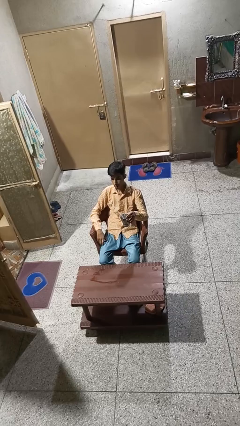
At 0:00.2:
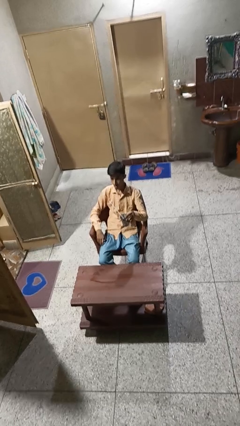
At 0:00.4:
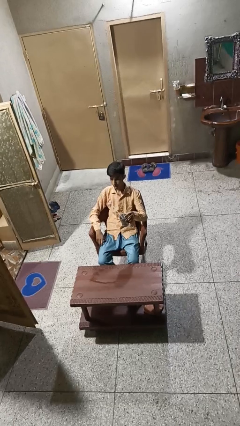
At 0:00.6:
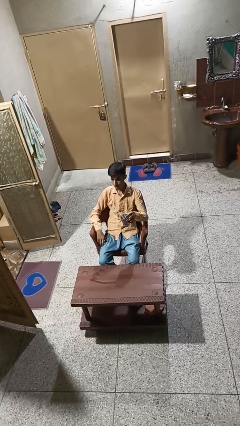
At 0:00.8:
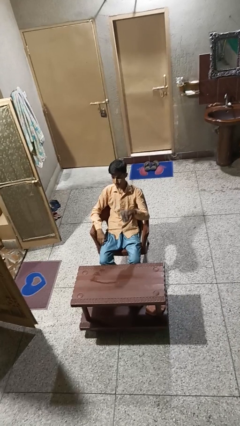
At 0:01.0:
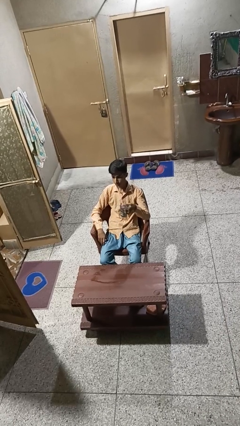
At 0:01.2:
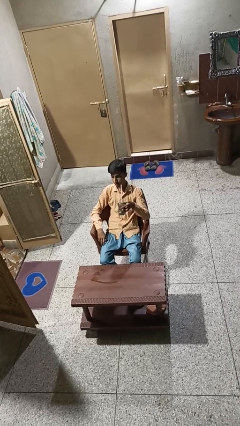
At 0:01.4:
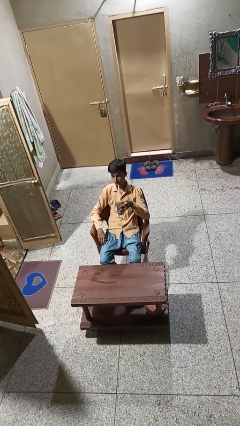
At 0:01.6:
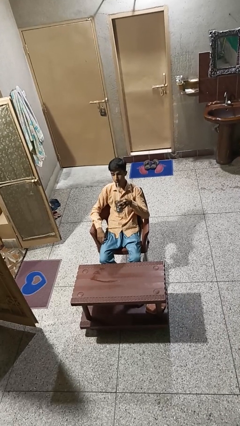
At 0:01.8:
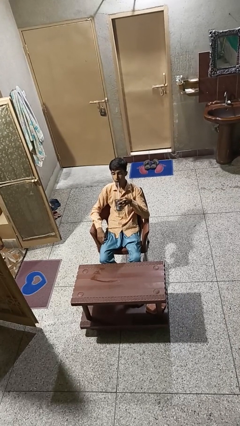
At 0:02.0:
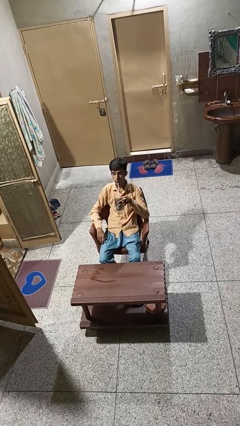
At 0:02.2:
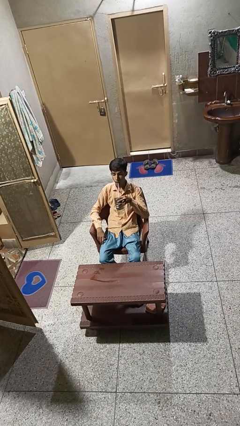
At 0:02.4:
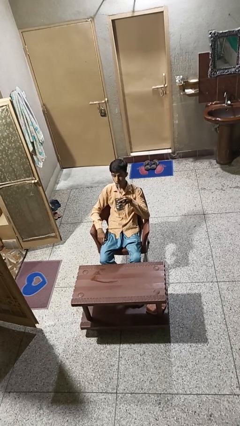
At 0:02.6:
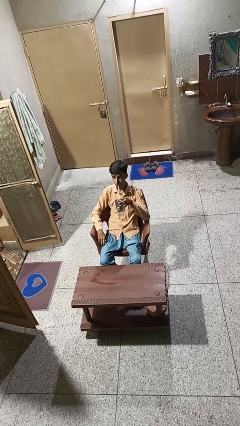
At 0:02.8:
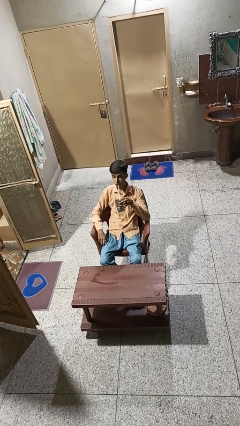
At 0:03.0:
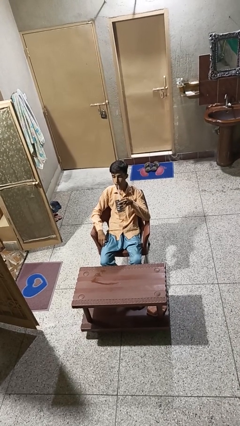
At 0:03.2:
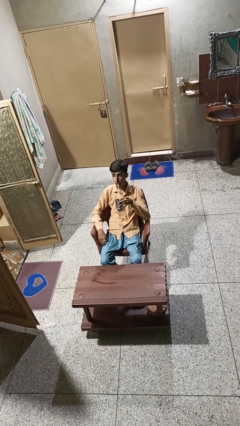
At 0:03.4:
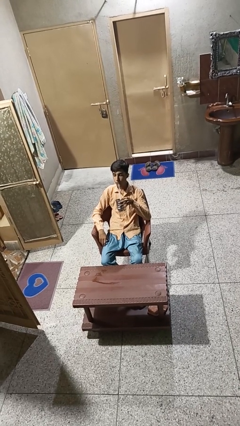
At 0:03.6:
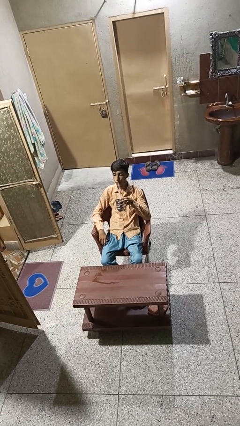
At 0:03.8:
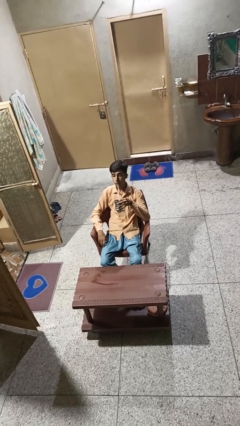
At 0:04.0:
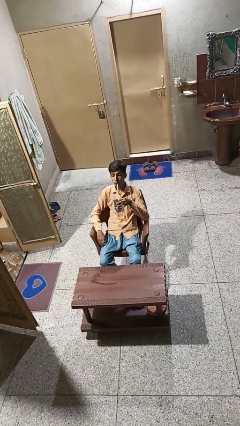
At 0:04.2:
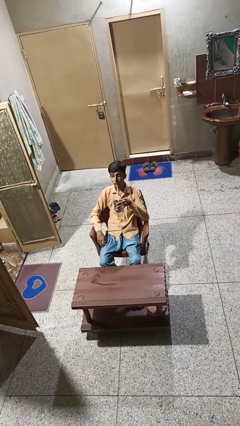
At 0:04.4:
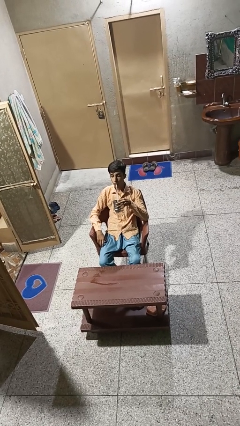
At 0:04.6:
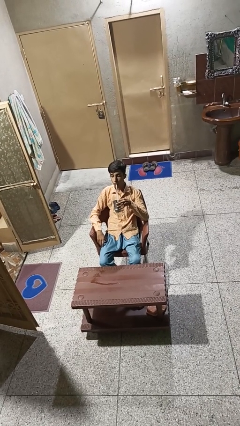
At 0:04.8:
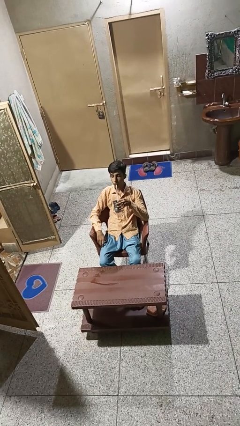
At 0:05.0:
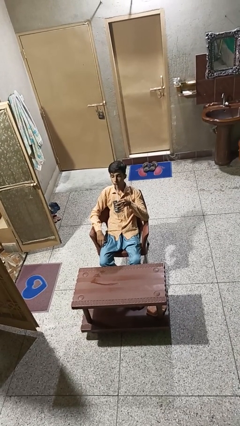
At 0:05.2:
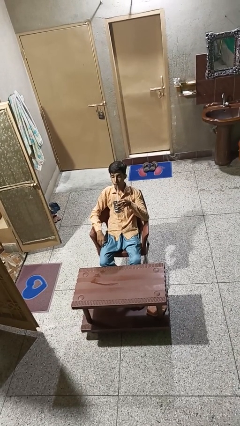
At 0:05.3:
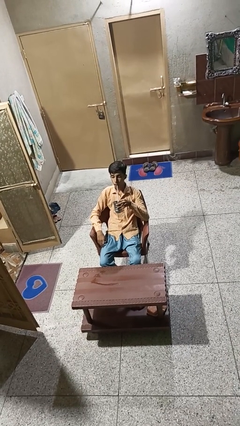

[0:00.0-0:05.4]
person drinks from straw

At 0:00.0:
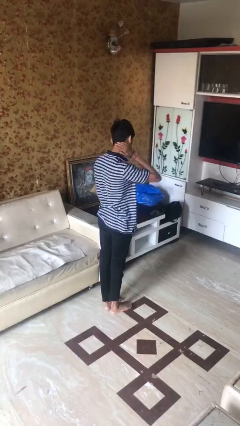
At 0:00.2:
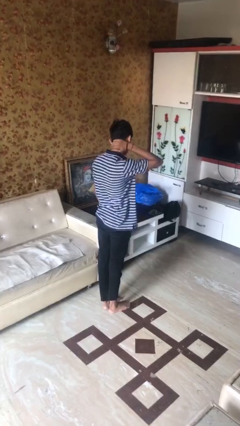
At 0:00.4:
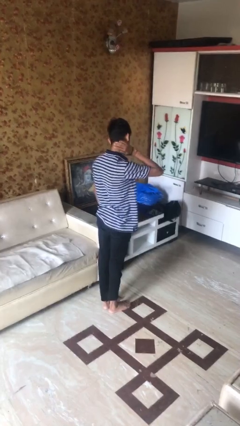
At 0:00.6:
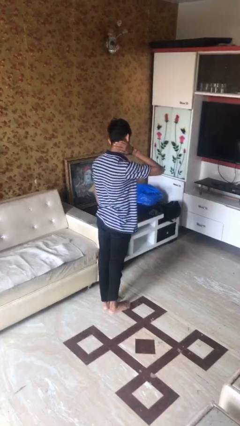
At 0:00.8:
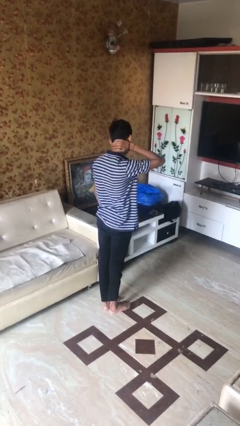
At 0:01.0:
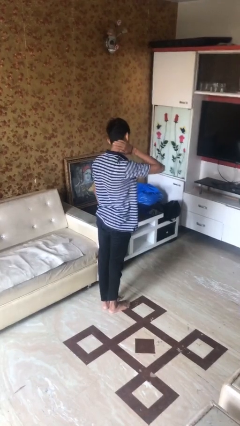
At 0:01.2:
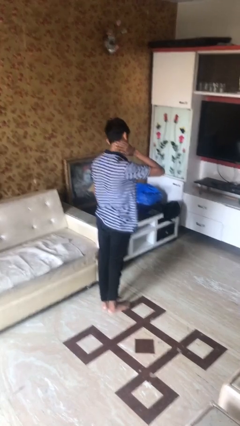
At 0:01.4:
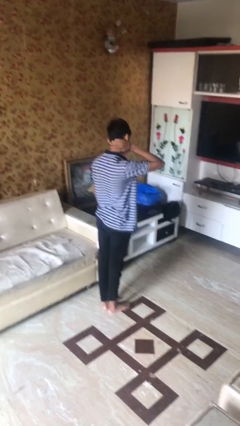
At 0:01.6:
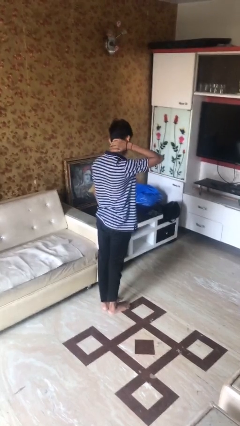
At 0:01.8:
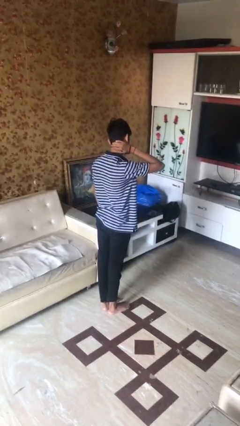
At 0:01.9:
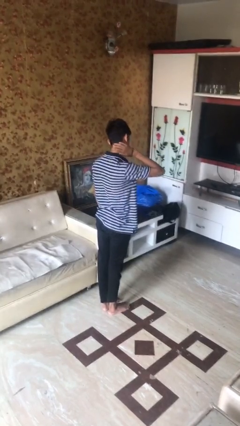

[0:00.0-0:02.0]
person rubs neck

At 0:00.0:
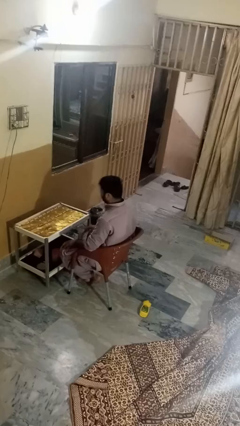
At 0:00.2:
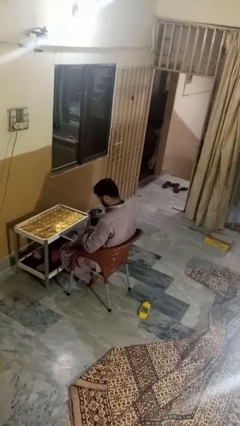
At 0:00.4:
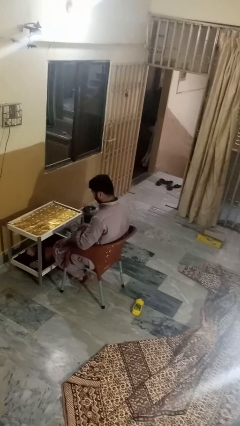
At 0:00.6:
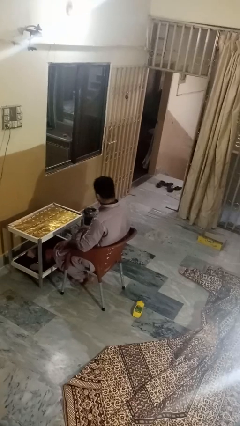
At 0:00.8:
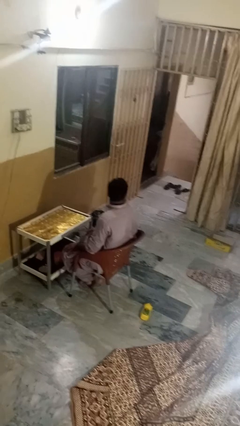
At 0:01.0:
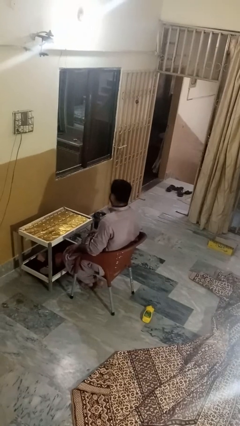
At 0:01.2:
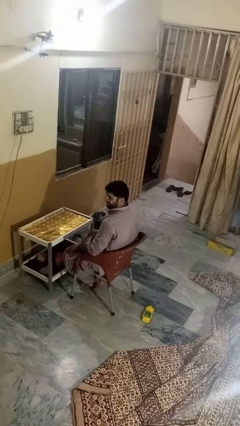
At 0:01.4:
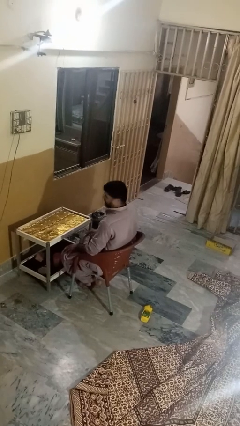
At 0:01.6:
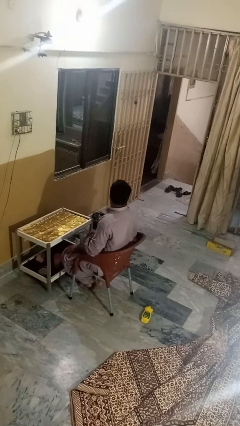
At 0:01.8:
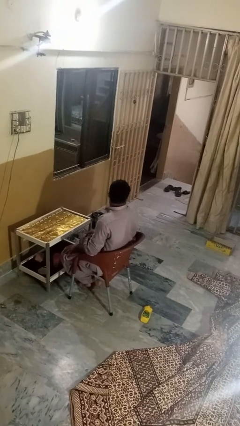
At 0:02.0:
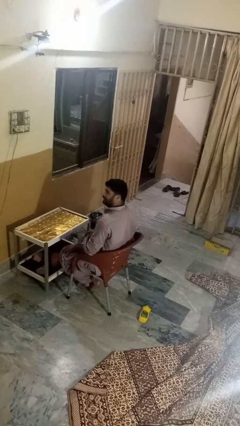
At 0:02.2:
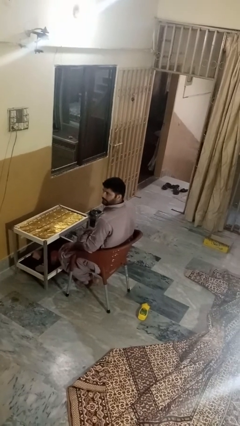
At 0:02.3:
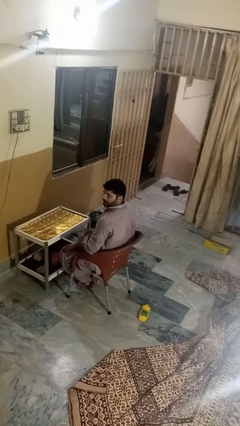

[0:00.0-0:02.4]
person shakes head

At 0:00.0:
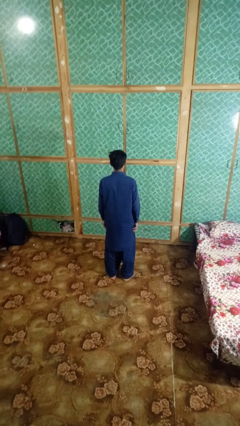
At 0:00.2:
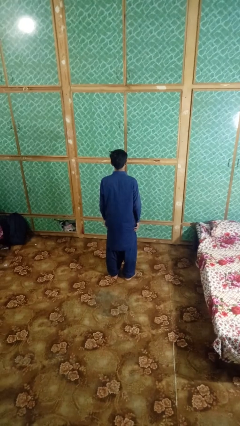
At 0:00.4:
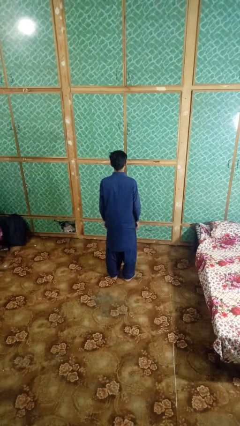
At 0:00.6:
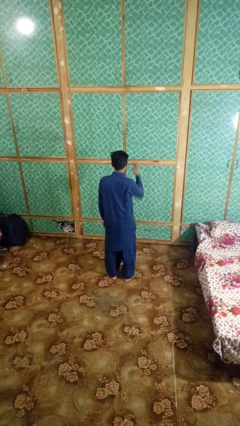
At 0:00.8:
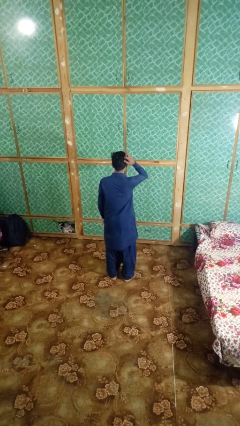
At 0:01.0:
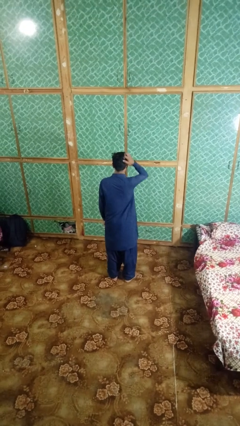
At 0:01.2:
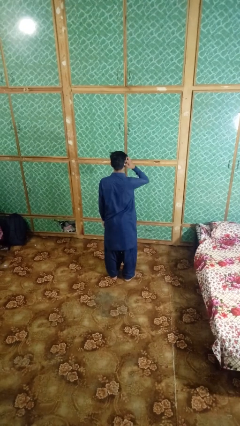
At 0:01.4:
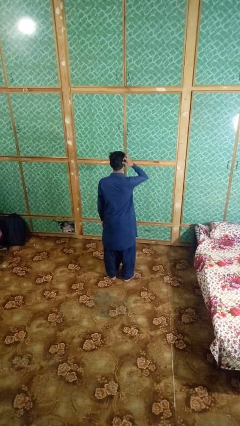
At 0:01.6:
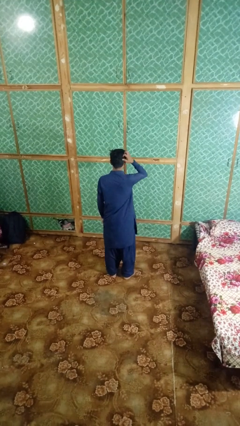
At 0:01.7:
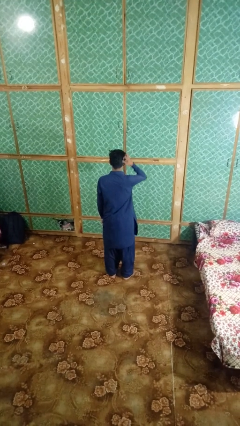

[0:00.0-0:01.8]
person strokes hair

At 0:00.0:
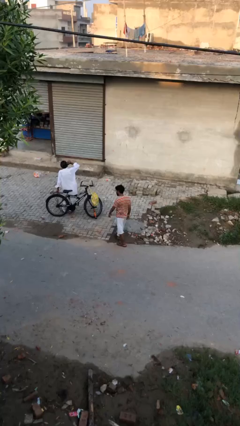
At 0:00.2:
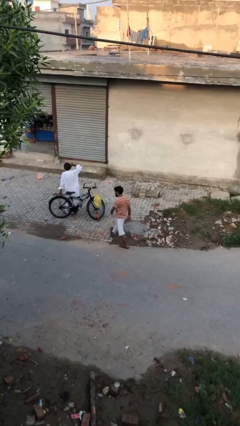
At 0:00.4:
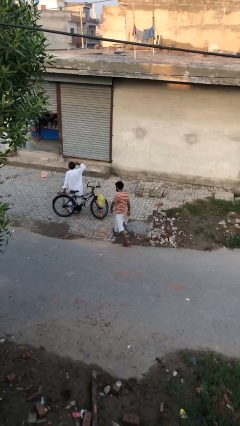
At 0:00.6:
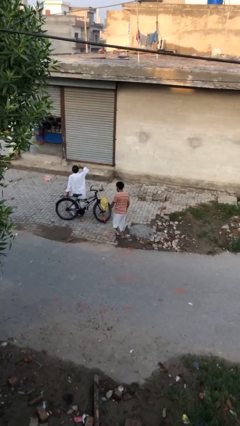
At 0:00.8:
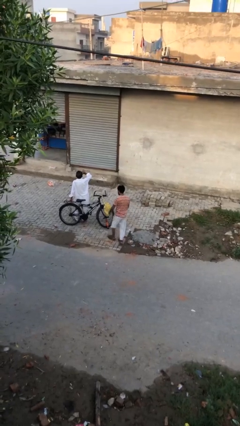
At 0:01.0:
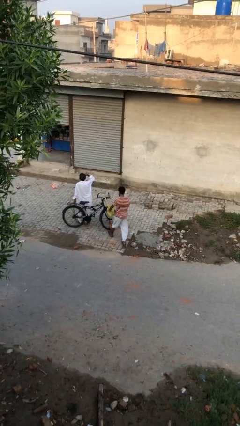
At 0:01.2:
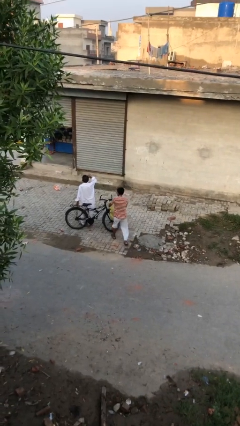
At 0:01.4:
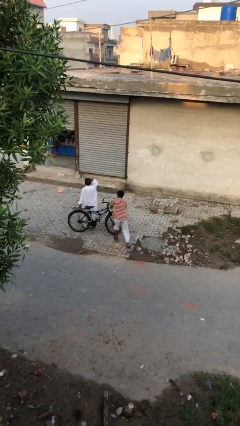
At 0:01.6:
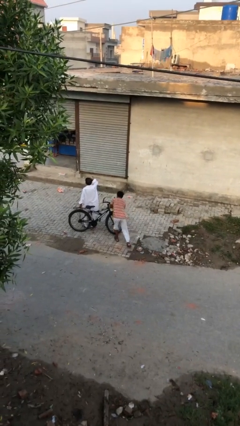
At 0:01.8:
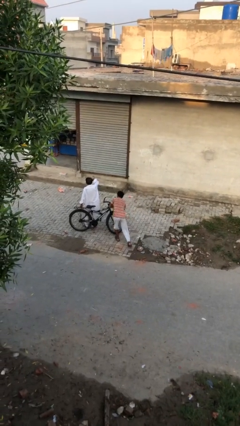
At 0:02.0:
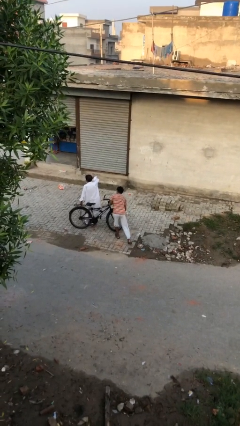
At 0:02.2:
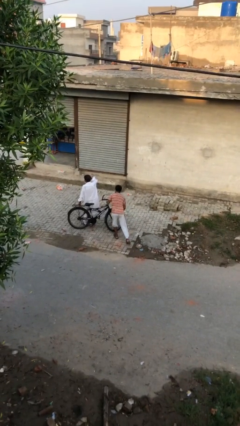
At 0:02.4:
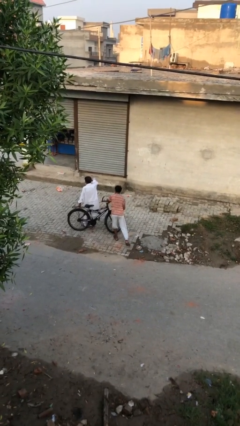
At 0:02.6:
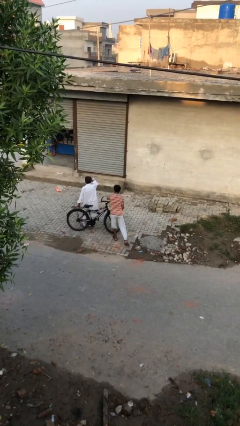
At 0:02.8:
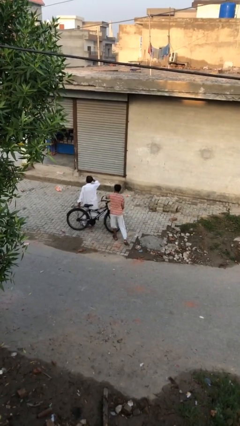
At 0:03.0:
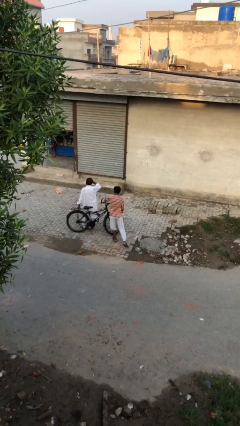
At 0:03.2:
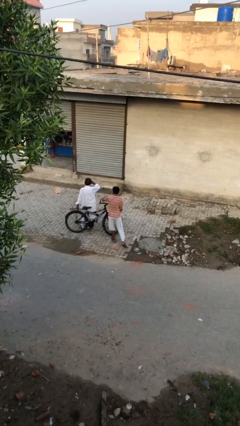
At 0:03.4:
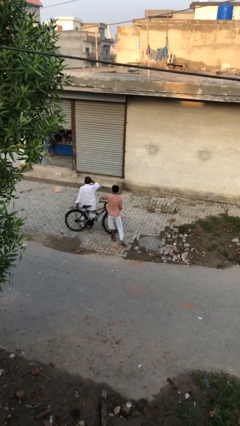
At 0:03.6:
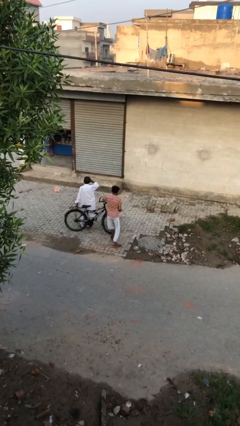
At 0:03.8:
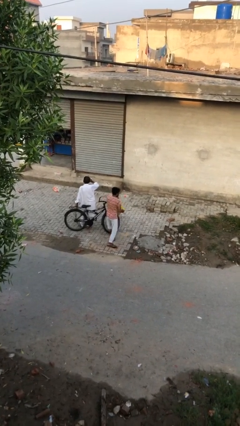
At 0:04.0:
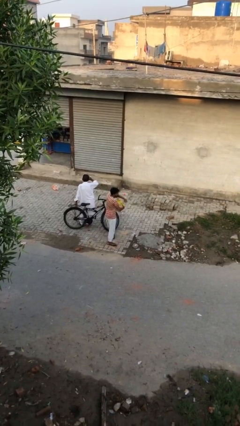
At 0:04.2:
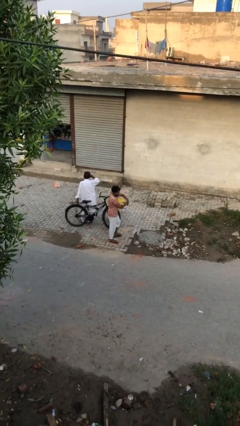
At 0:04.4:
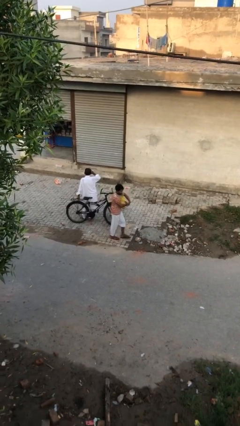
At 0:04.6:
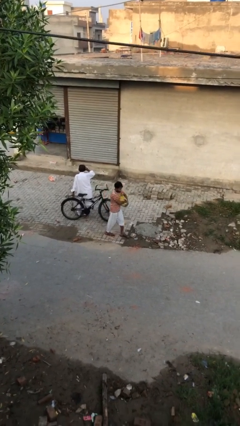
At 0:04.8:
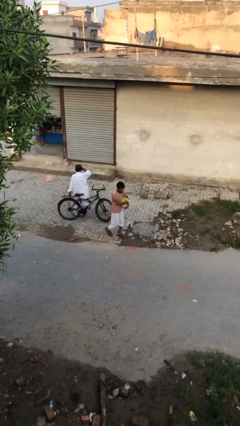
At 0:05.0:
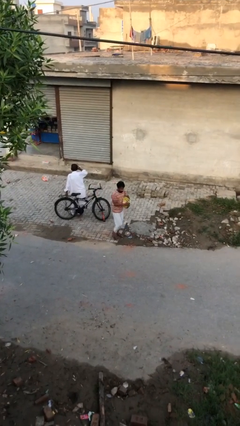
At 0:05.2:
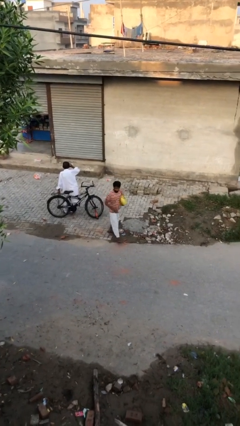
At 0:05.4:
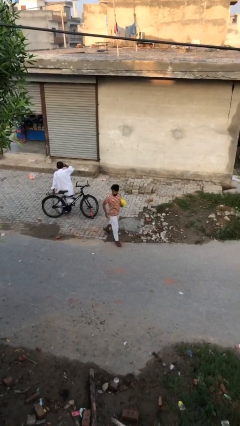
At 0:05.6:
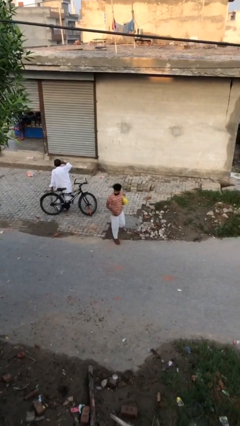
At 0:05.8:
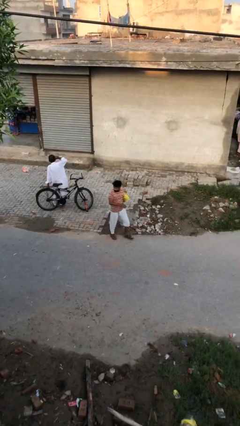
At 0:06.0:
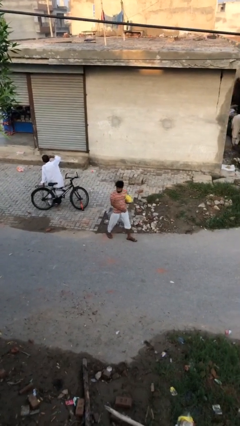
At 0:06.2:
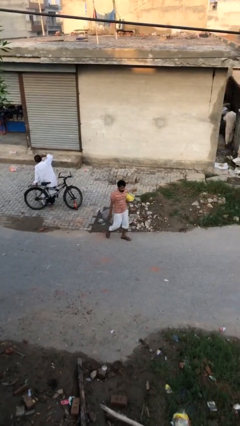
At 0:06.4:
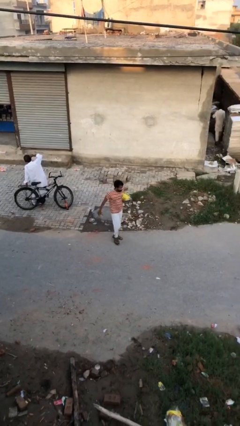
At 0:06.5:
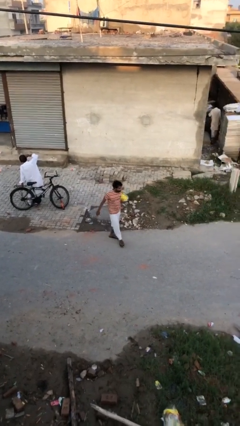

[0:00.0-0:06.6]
person steals object from person
